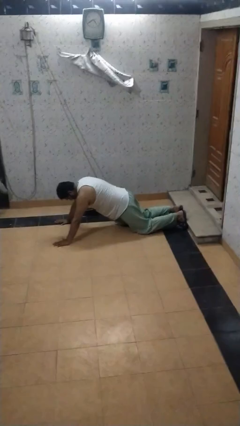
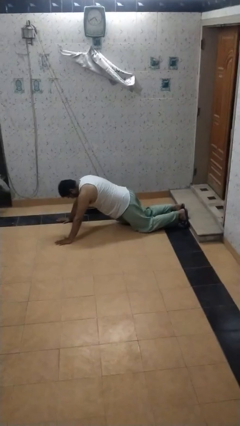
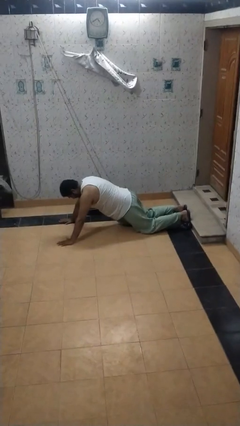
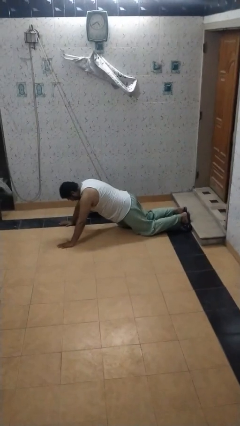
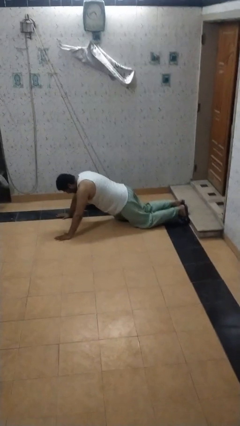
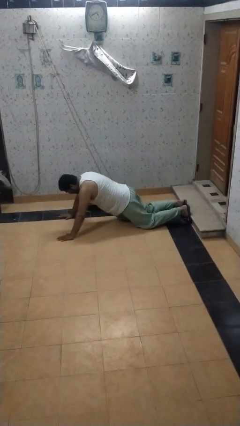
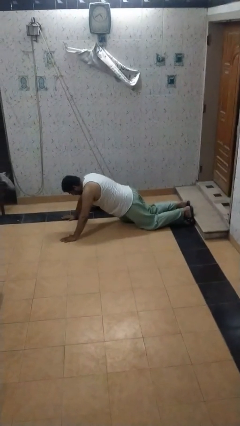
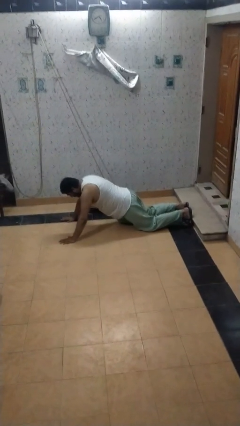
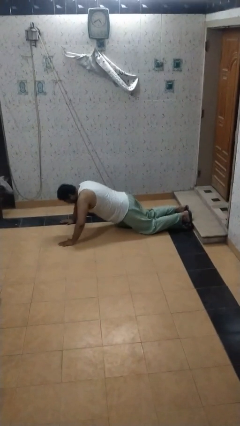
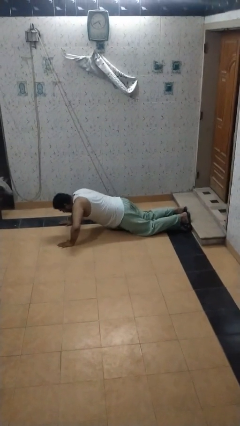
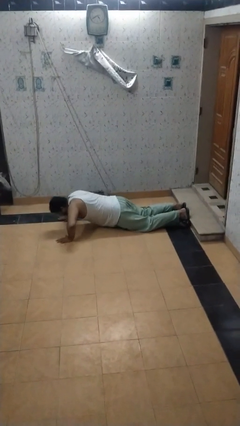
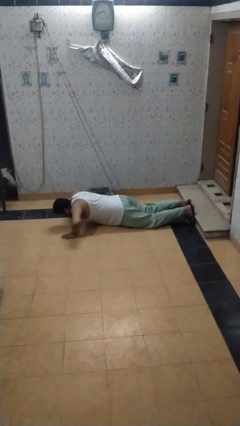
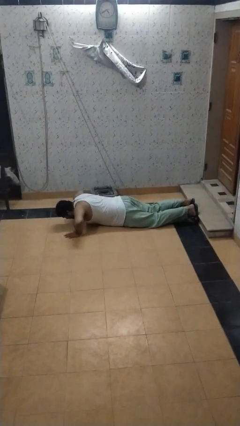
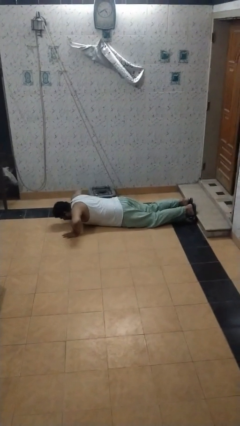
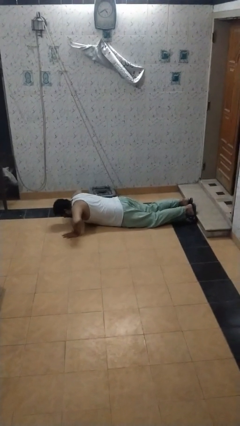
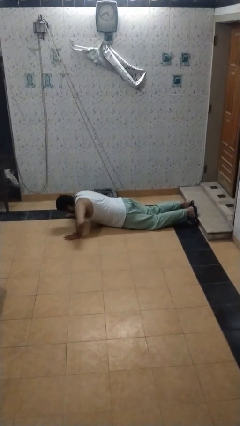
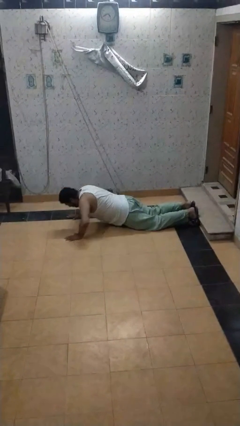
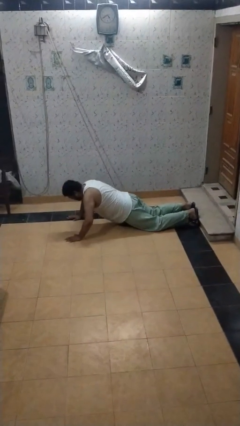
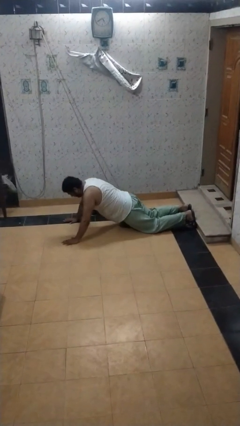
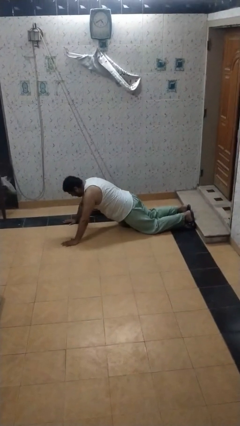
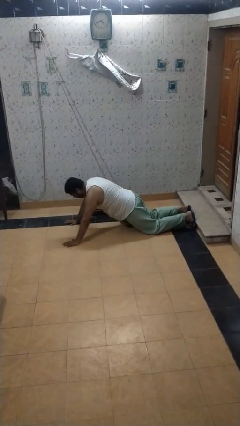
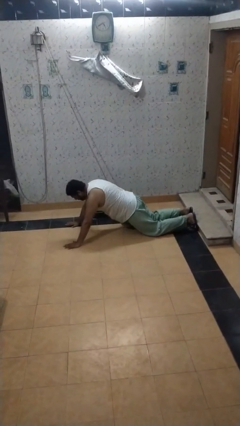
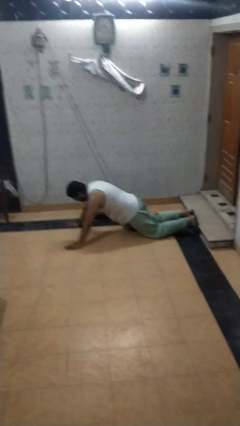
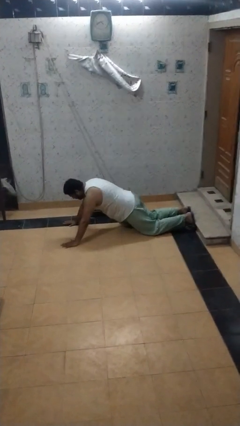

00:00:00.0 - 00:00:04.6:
person exercises with pushup

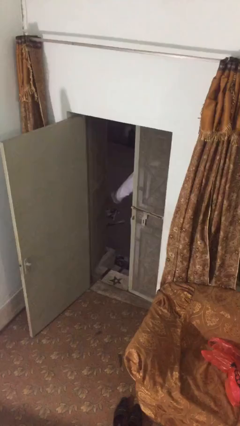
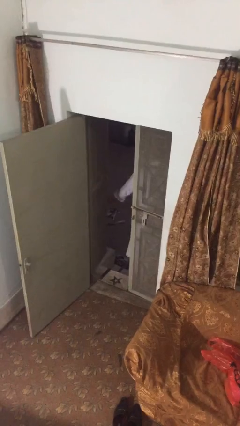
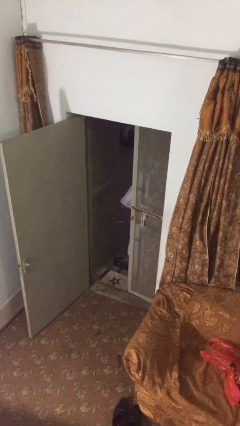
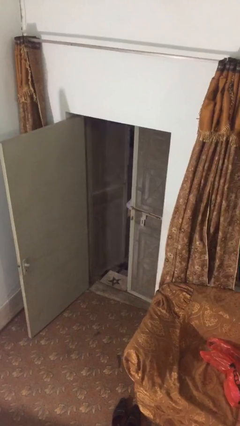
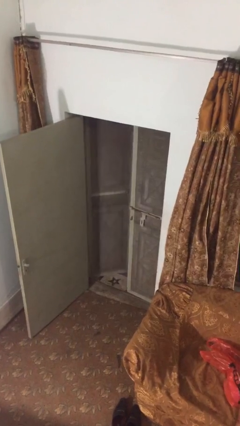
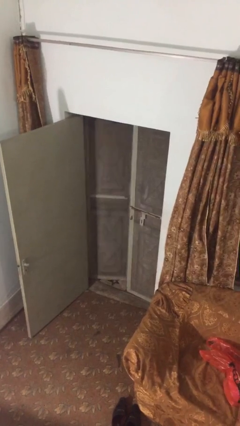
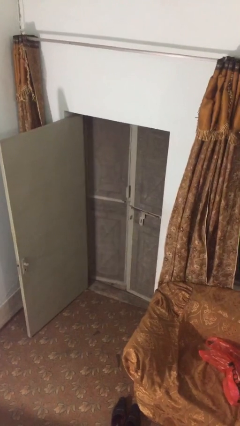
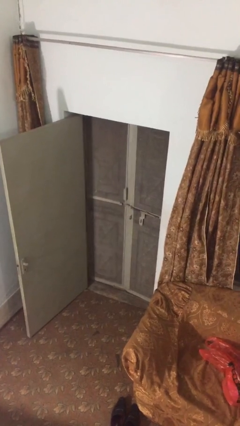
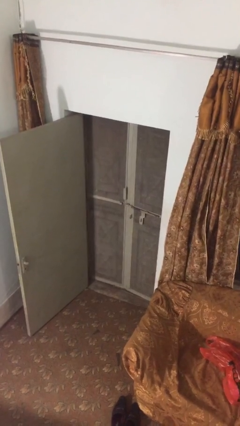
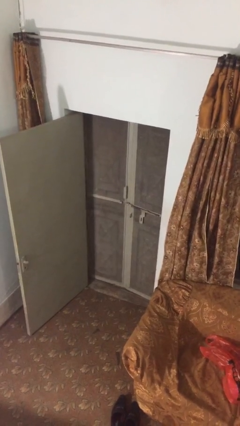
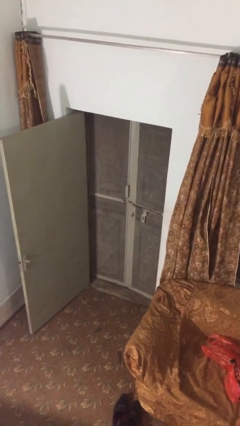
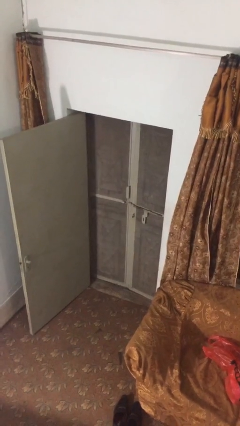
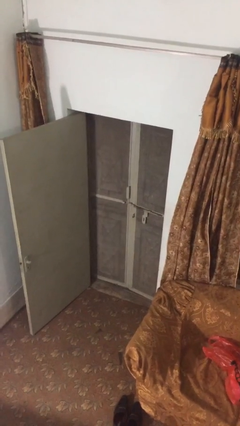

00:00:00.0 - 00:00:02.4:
person closes facility door

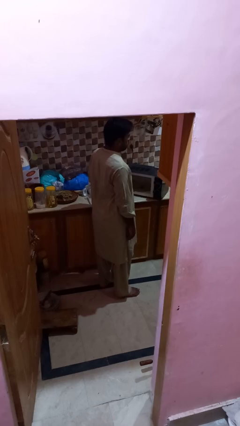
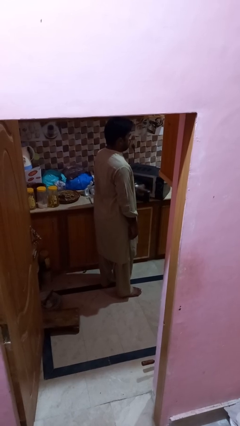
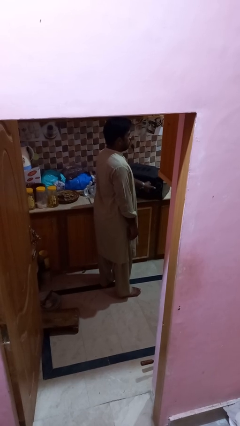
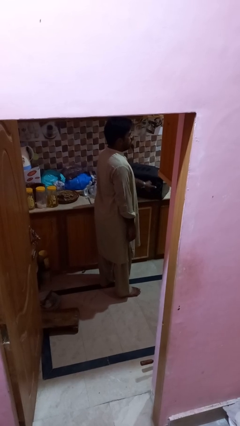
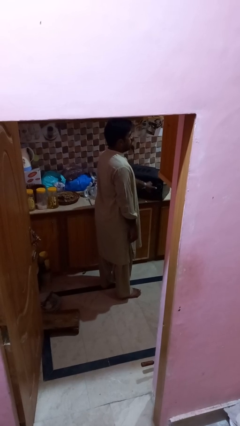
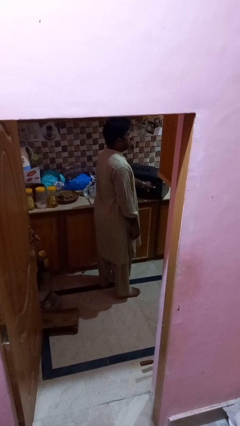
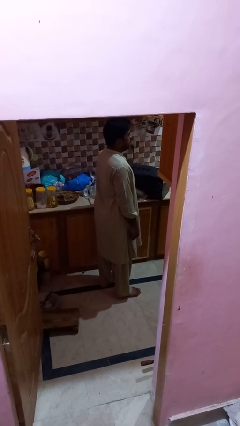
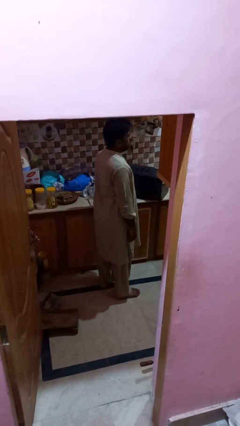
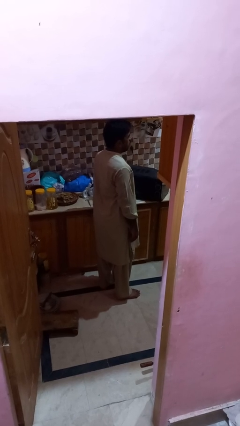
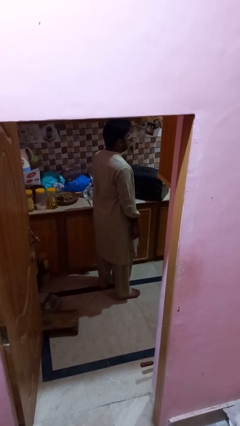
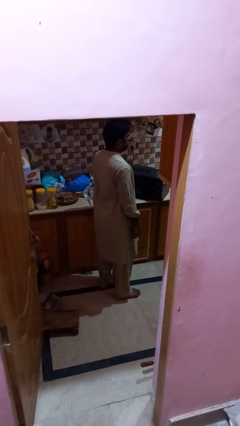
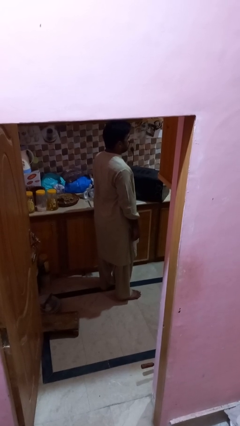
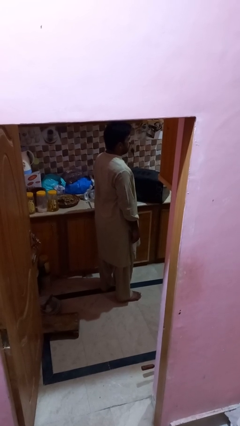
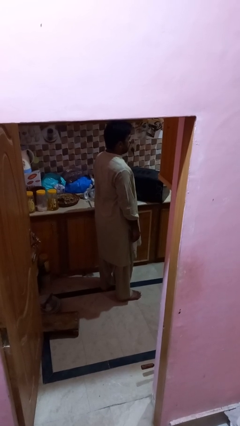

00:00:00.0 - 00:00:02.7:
person closes microwave

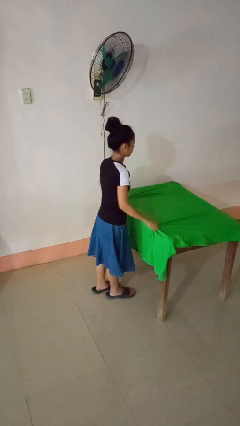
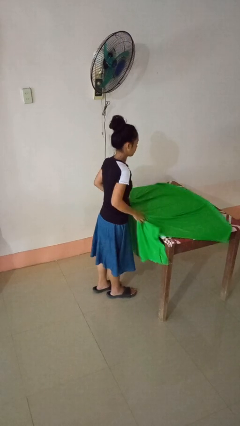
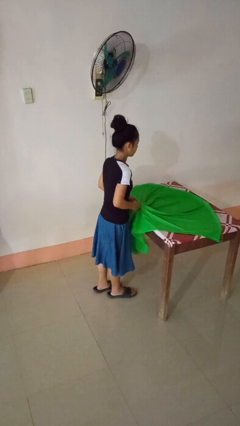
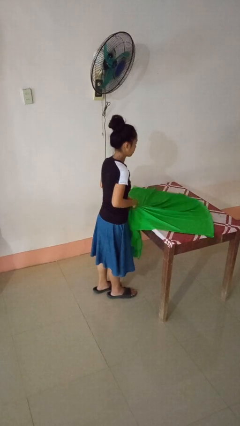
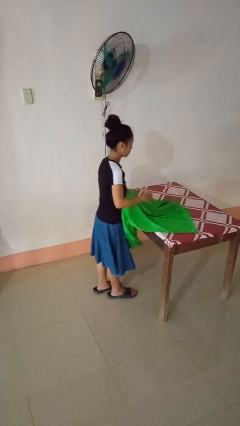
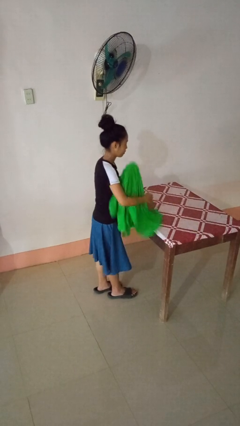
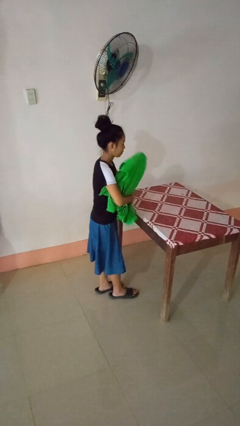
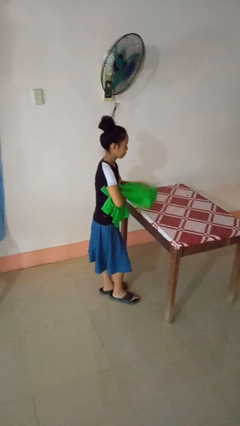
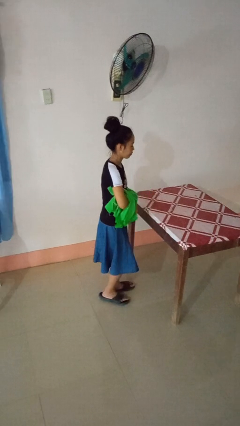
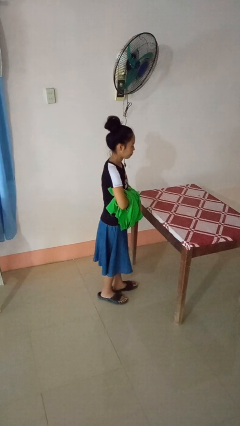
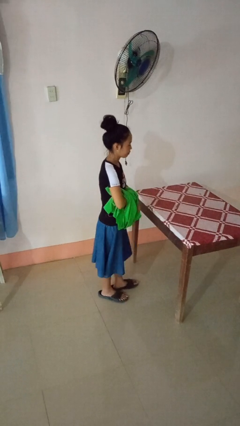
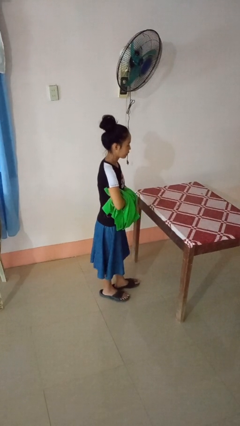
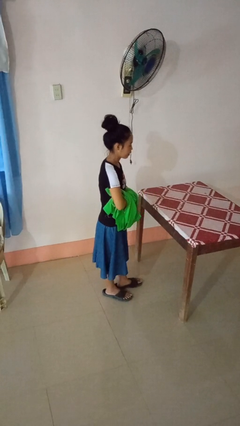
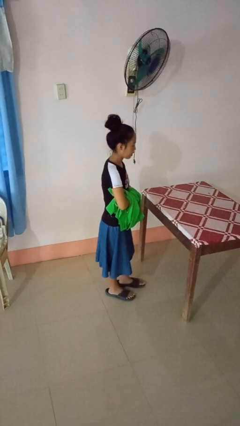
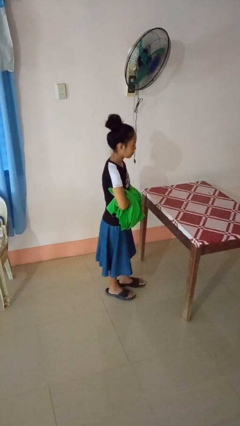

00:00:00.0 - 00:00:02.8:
person folds tablecloth

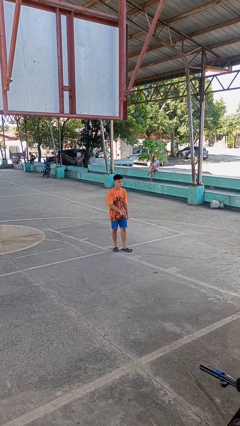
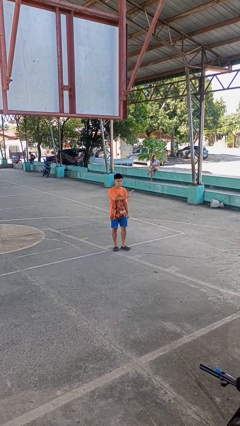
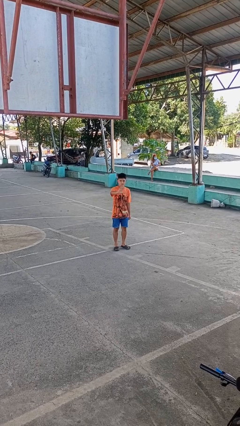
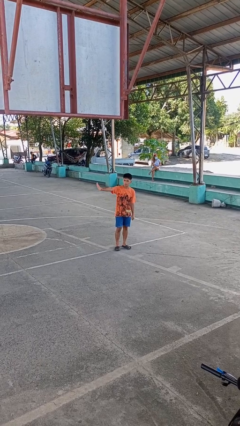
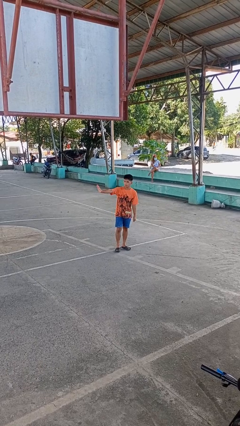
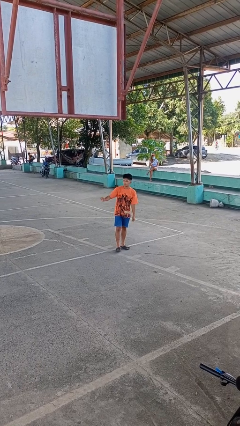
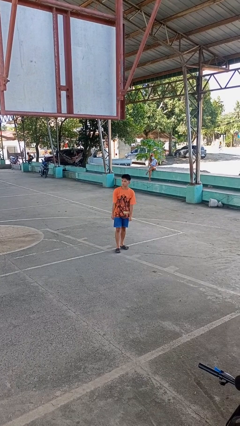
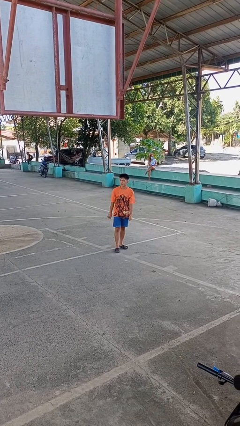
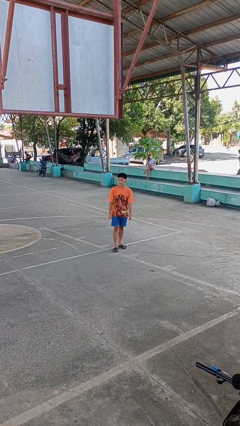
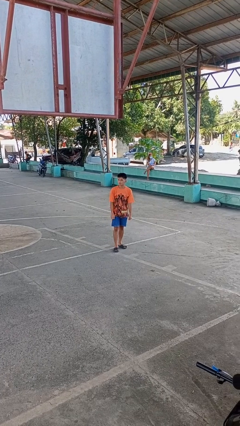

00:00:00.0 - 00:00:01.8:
person gestures swipe right

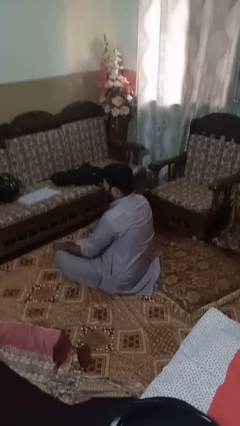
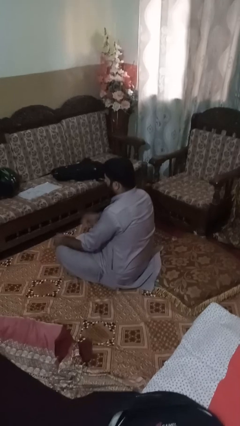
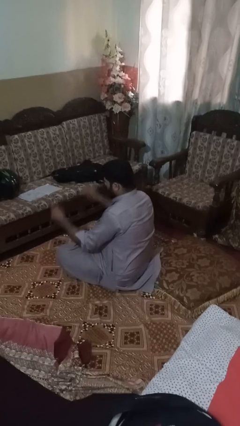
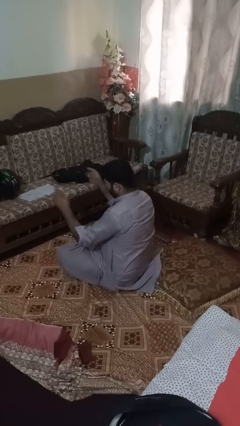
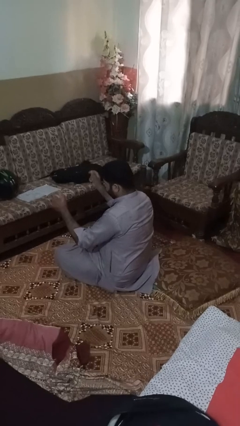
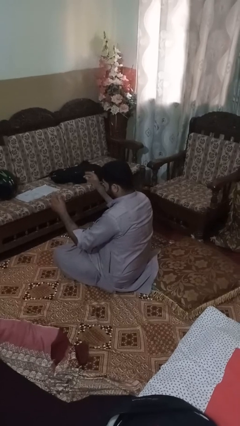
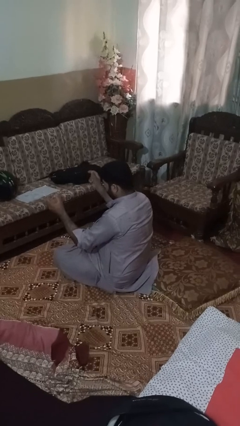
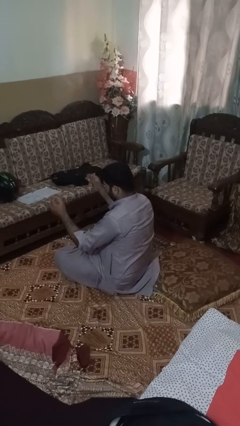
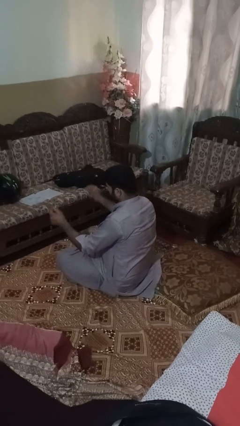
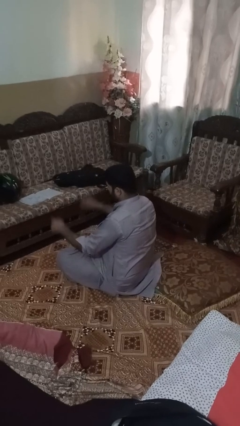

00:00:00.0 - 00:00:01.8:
person snaps fingers

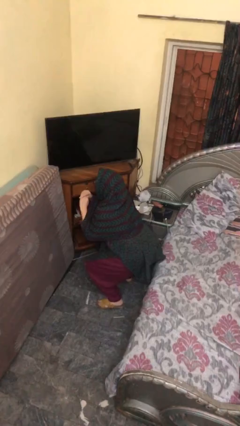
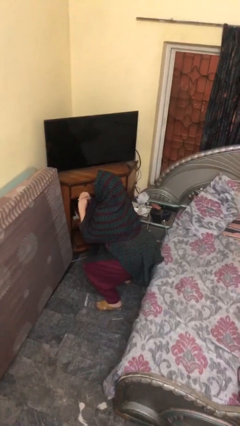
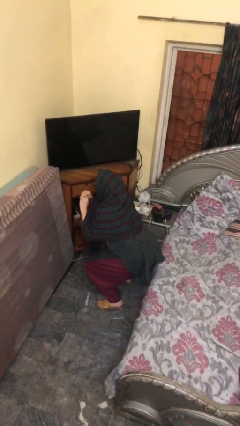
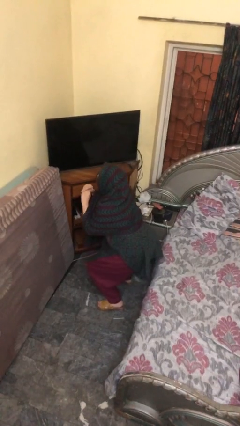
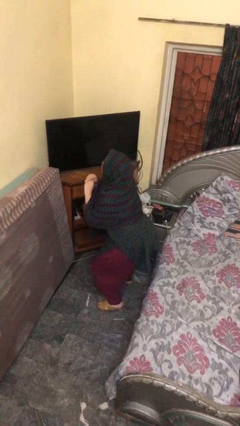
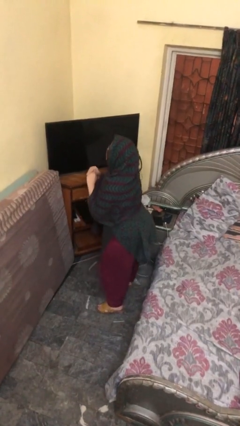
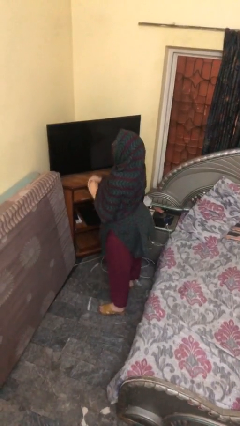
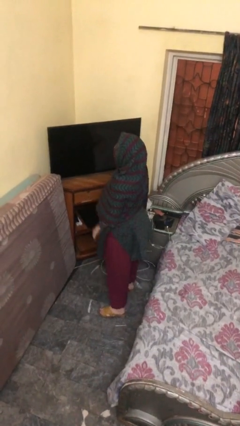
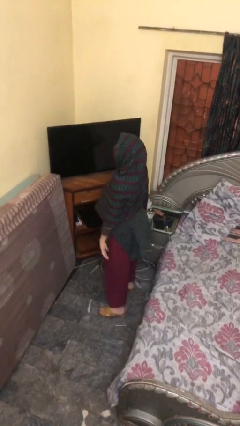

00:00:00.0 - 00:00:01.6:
person stands up
